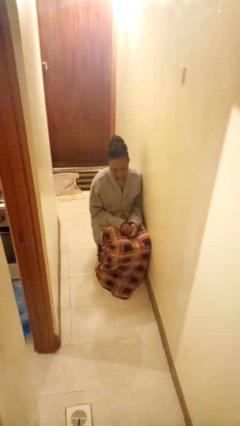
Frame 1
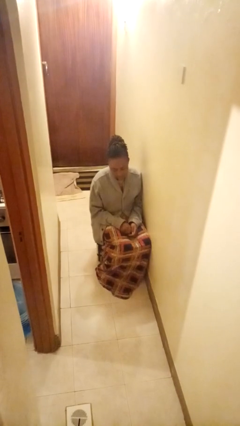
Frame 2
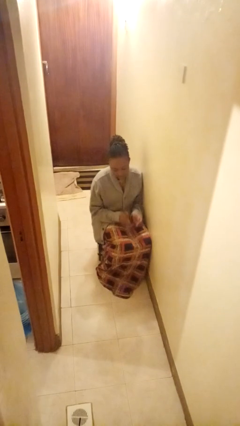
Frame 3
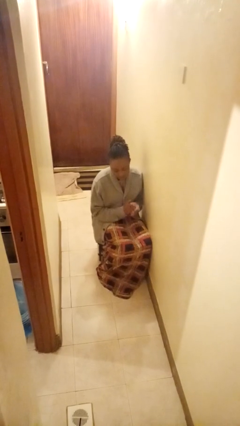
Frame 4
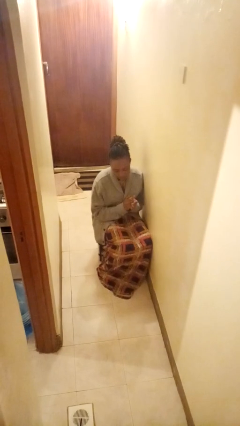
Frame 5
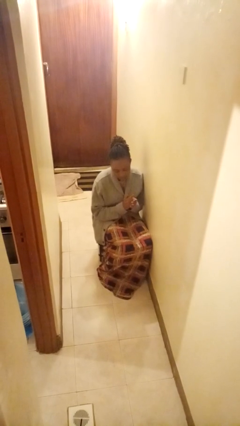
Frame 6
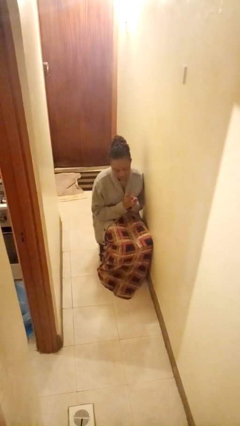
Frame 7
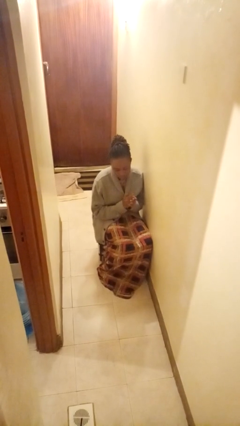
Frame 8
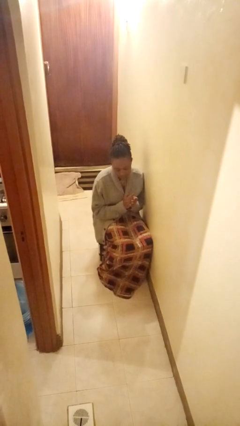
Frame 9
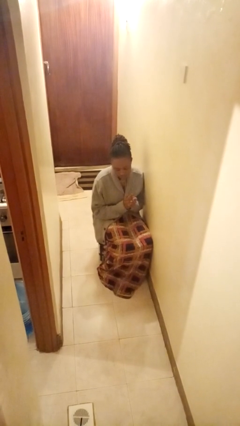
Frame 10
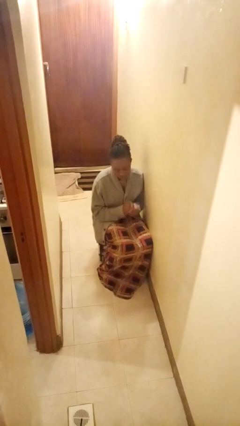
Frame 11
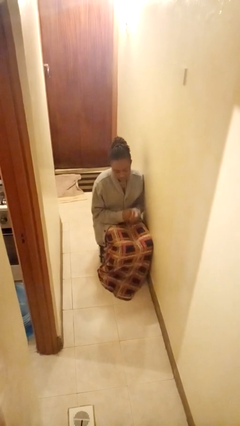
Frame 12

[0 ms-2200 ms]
person claps hands

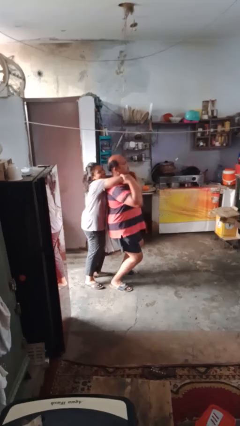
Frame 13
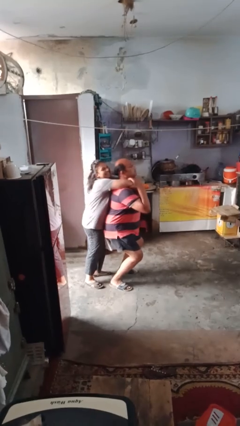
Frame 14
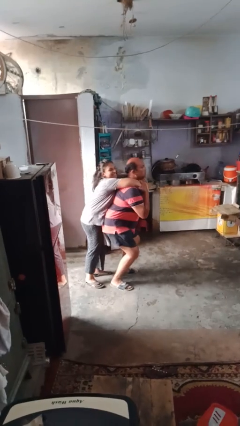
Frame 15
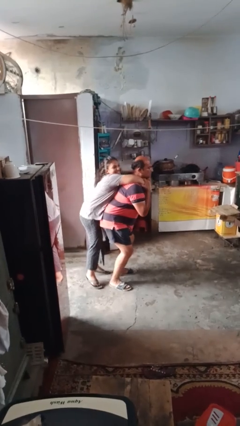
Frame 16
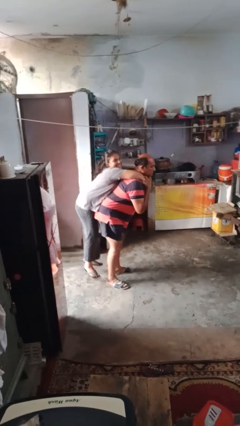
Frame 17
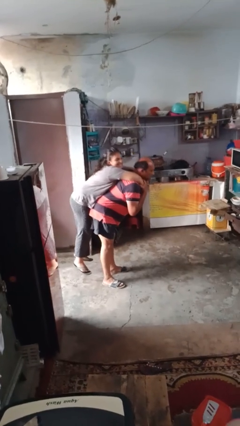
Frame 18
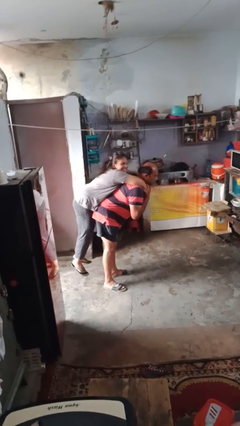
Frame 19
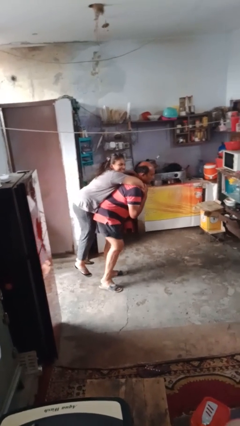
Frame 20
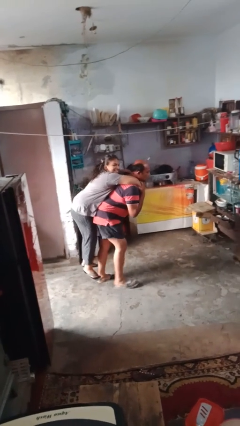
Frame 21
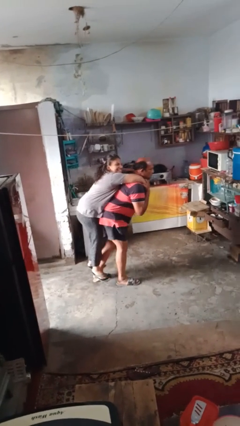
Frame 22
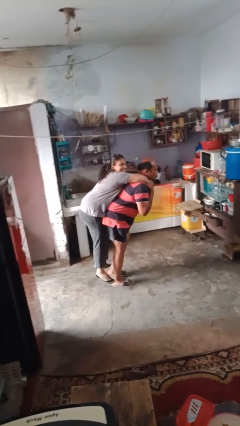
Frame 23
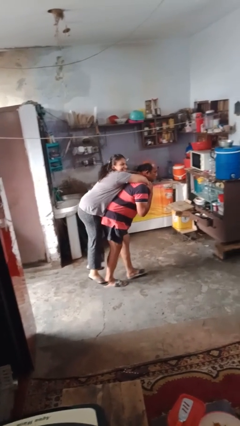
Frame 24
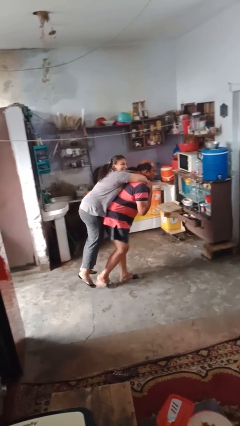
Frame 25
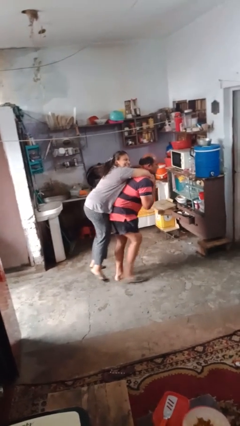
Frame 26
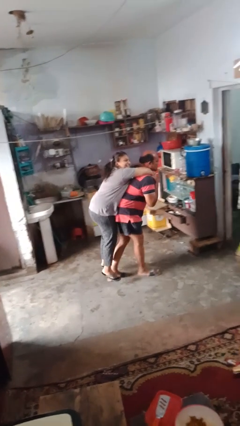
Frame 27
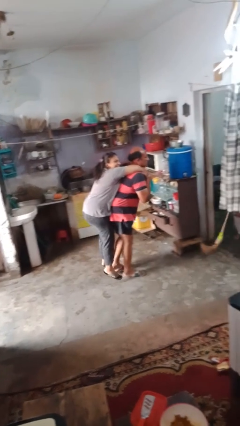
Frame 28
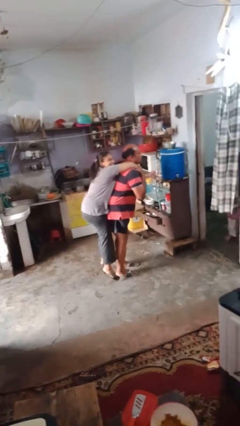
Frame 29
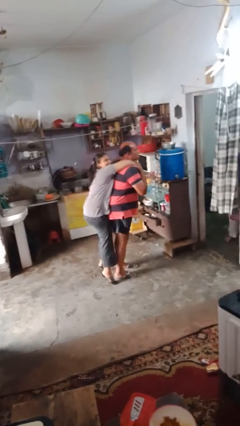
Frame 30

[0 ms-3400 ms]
person carries person on back

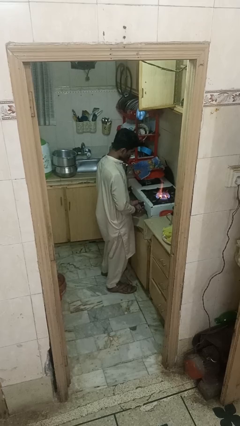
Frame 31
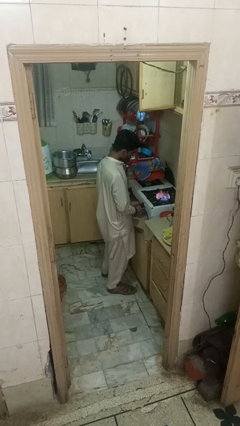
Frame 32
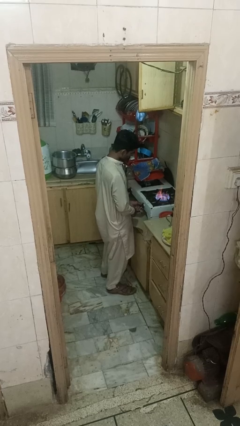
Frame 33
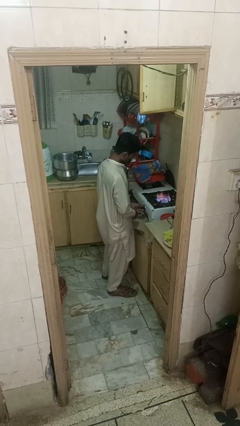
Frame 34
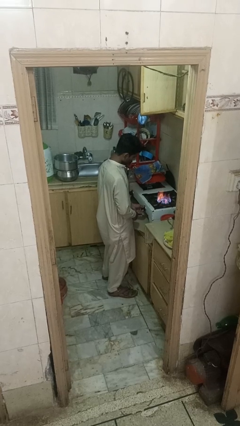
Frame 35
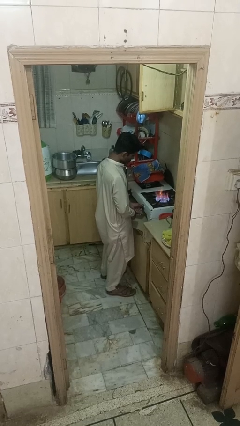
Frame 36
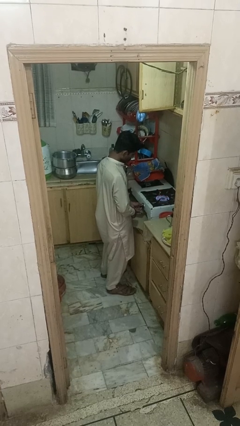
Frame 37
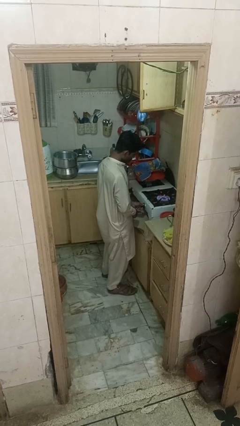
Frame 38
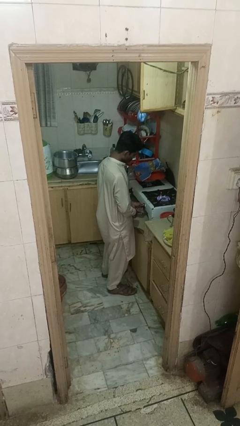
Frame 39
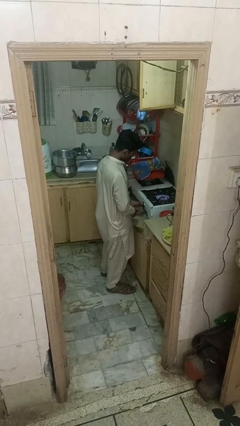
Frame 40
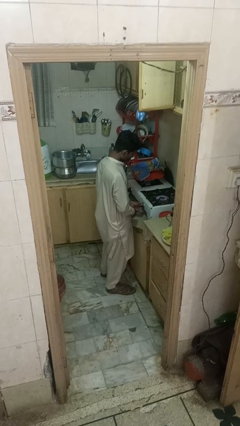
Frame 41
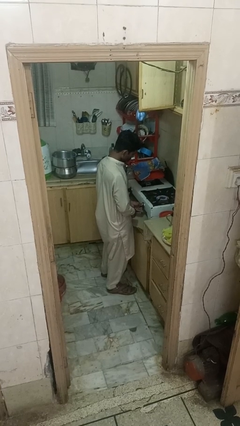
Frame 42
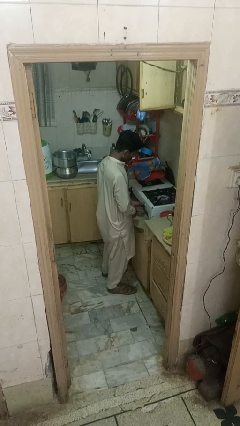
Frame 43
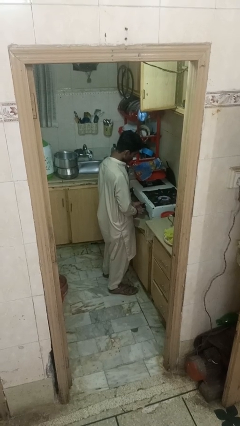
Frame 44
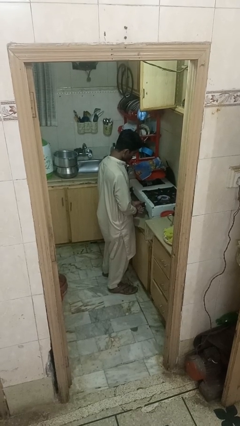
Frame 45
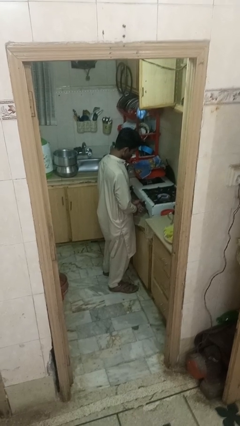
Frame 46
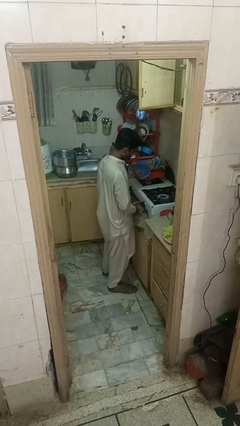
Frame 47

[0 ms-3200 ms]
person turns off stovetop

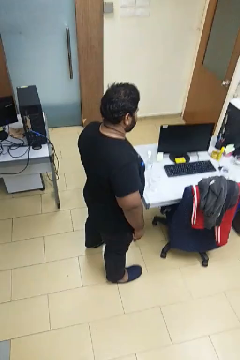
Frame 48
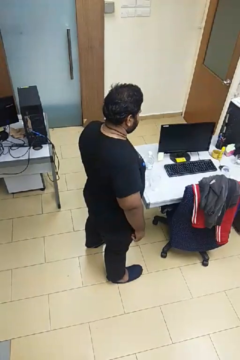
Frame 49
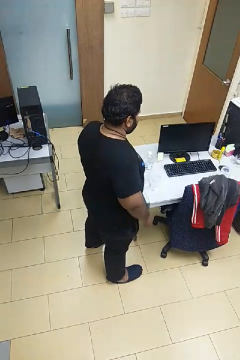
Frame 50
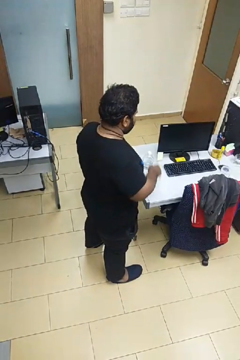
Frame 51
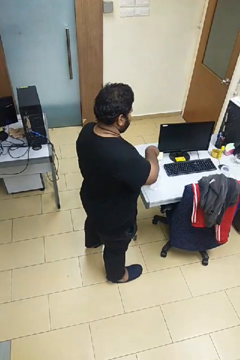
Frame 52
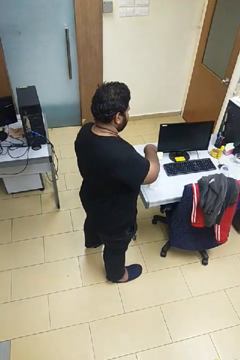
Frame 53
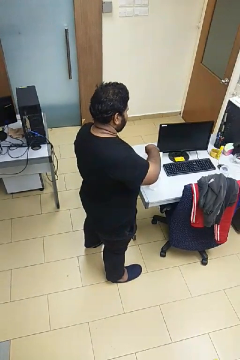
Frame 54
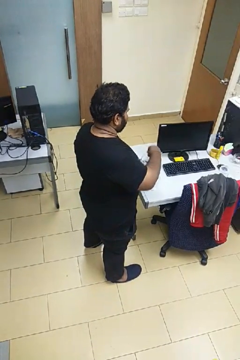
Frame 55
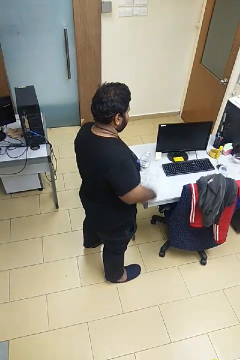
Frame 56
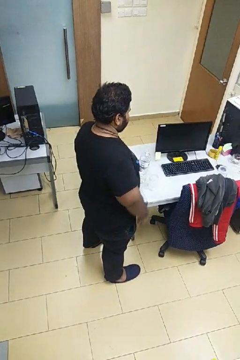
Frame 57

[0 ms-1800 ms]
person unscrews lid from bottle

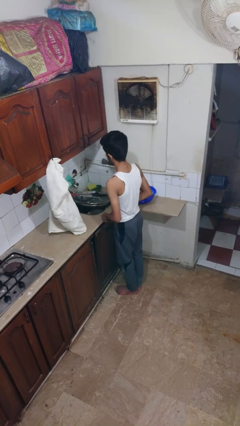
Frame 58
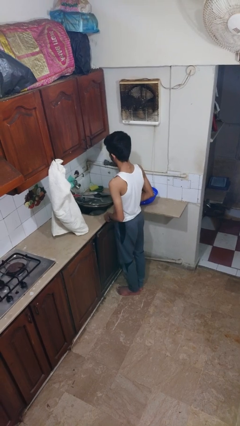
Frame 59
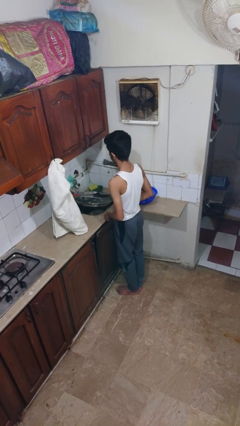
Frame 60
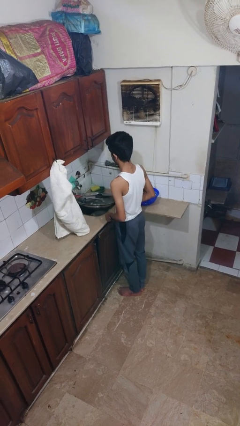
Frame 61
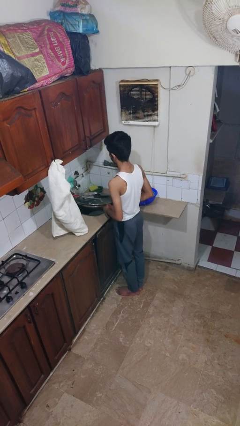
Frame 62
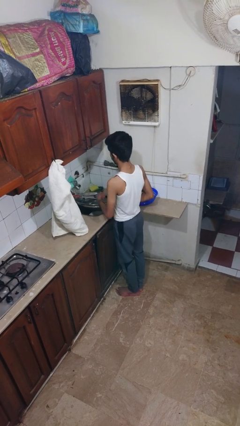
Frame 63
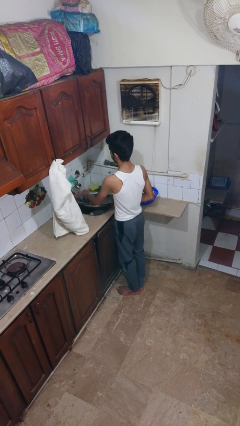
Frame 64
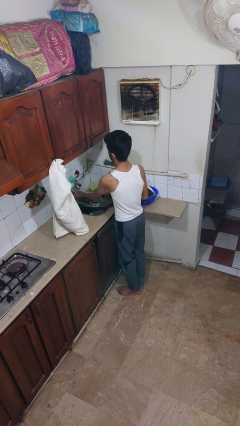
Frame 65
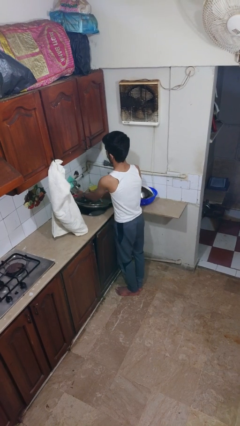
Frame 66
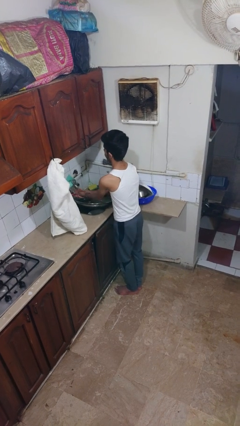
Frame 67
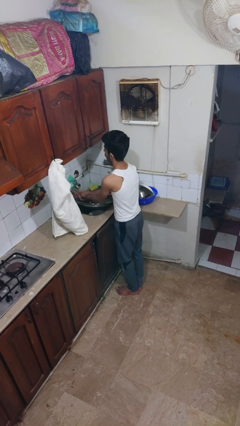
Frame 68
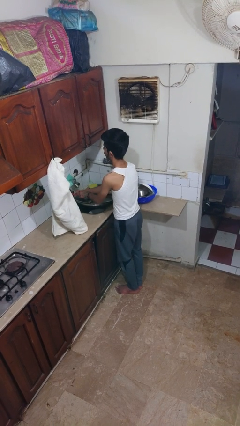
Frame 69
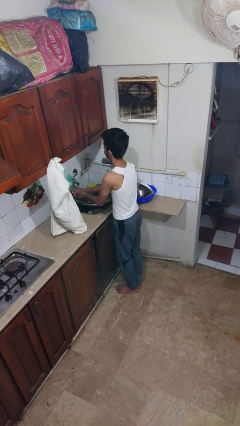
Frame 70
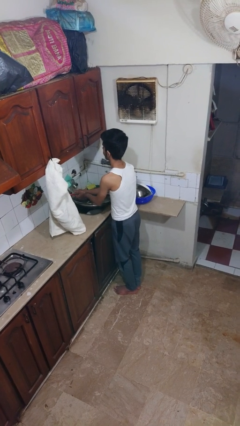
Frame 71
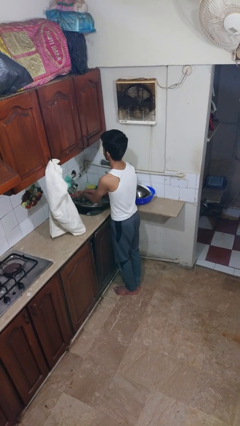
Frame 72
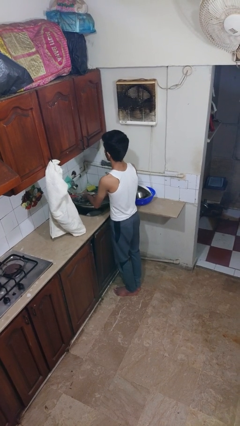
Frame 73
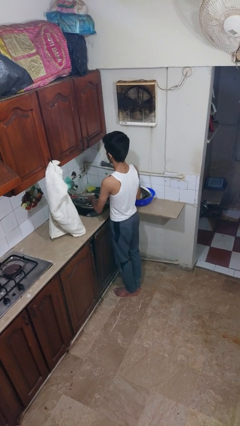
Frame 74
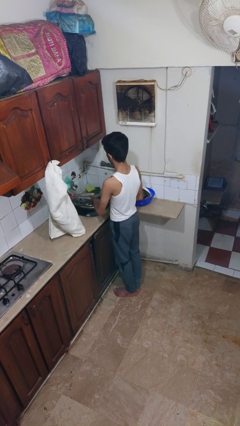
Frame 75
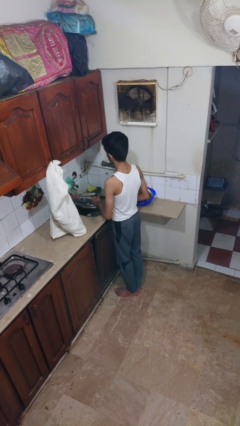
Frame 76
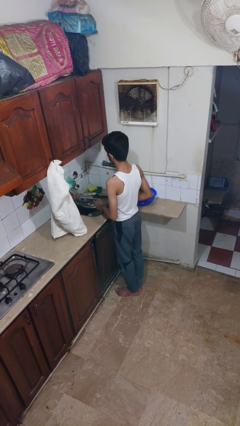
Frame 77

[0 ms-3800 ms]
person washes hands

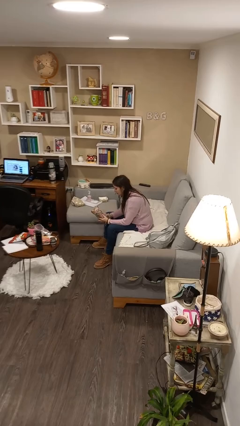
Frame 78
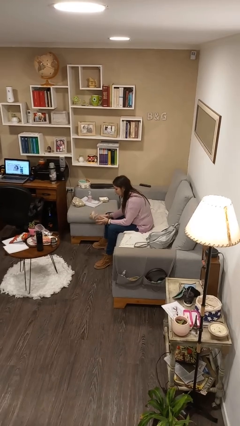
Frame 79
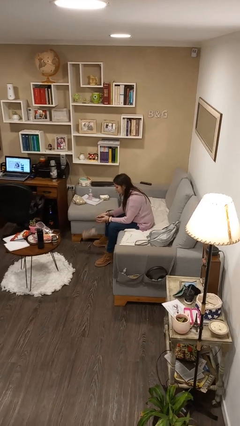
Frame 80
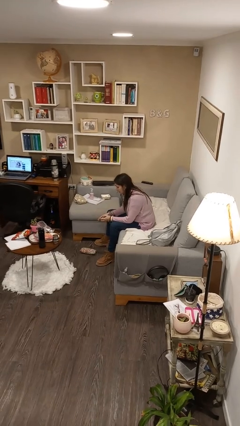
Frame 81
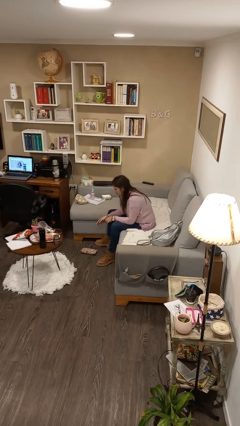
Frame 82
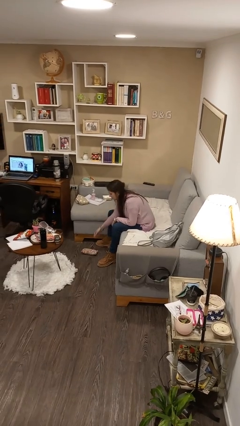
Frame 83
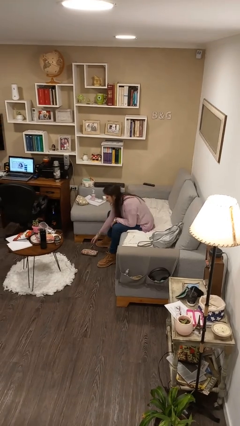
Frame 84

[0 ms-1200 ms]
person drops object

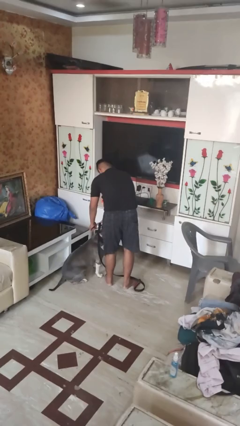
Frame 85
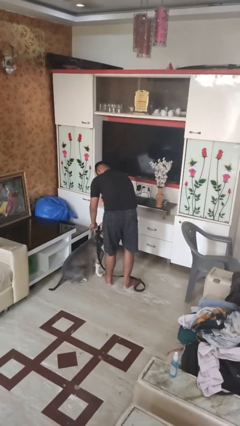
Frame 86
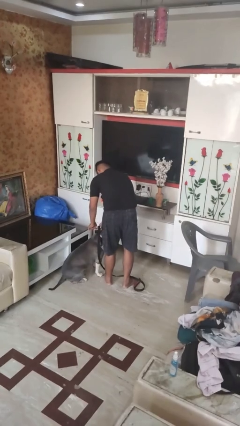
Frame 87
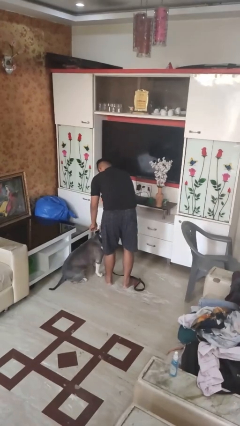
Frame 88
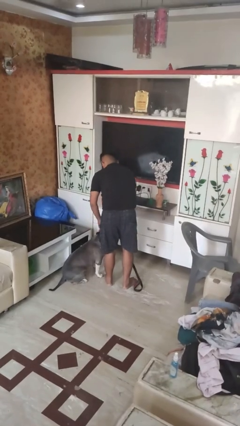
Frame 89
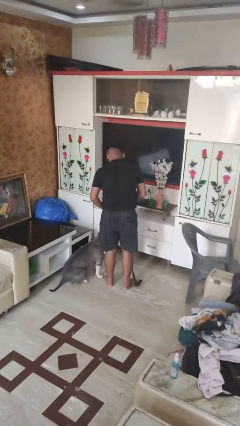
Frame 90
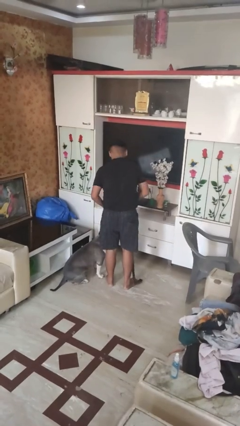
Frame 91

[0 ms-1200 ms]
person attaches leash to dog

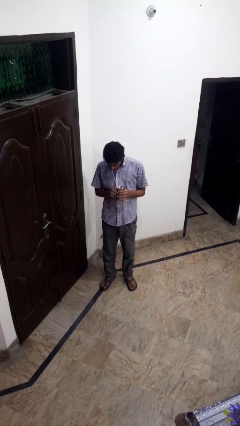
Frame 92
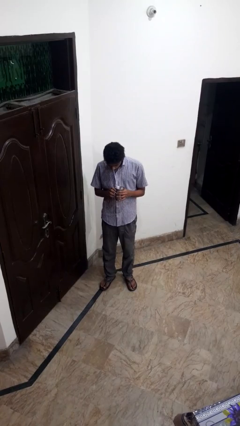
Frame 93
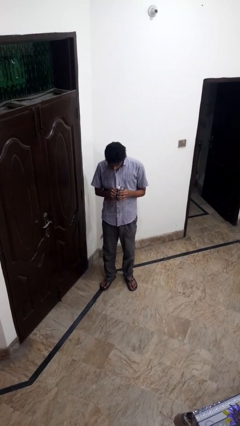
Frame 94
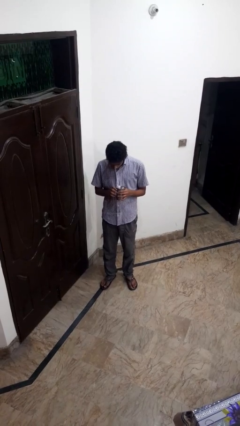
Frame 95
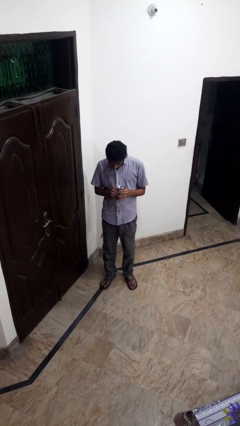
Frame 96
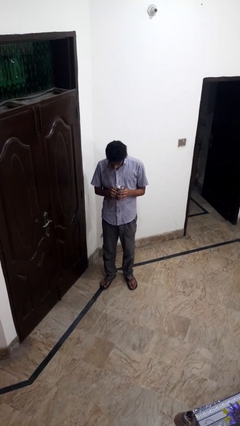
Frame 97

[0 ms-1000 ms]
person drinks from straw
